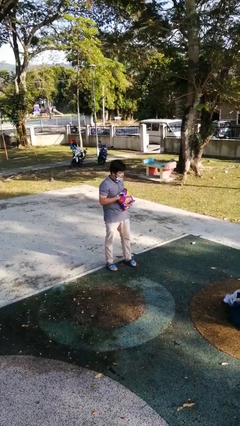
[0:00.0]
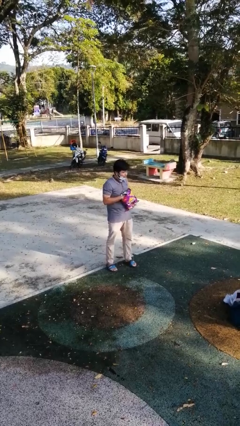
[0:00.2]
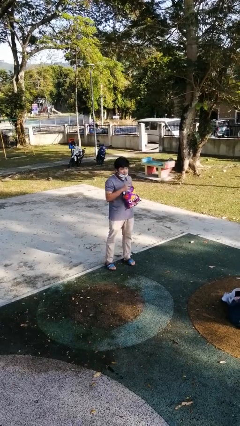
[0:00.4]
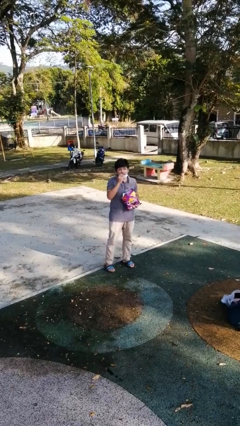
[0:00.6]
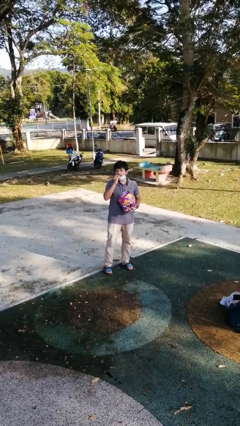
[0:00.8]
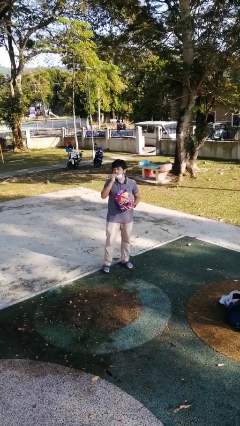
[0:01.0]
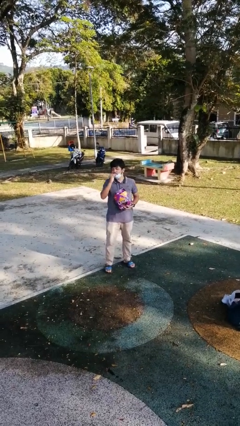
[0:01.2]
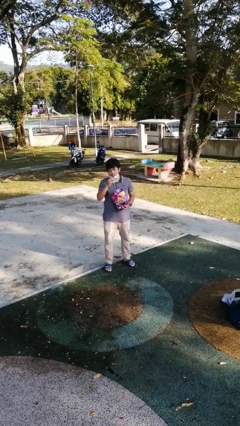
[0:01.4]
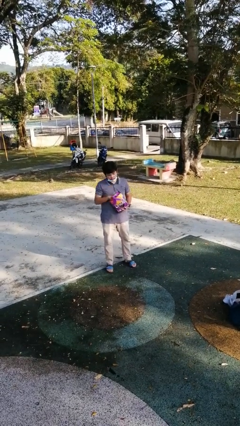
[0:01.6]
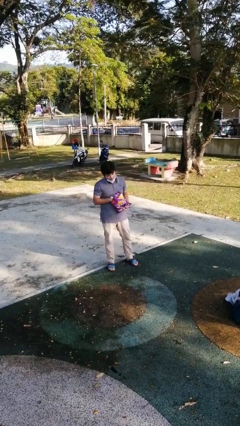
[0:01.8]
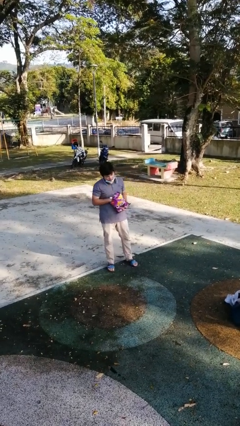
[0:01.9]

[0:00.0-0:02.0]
person eats snack from bag

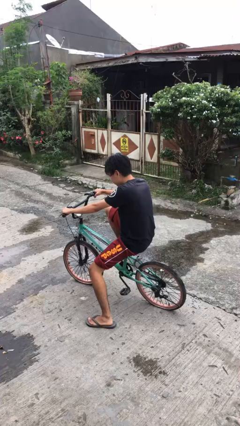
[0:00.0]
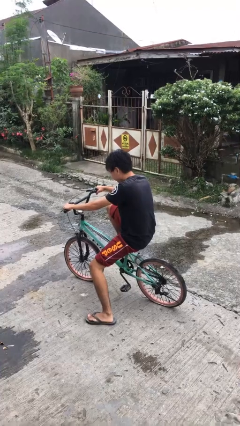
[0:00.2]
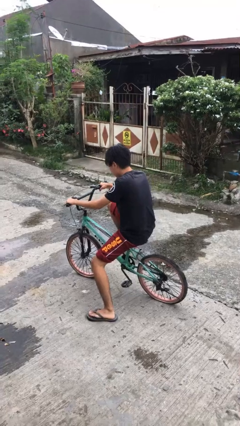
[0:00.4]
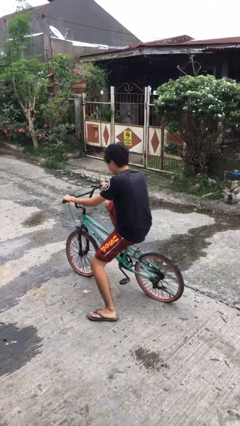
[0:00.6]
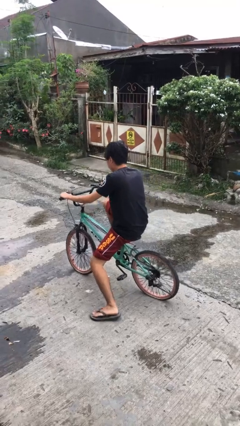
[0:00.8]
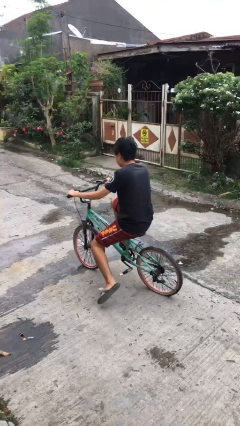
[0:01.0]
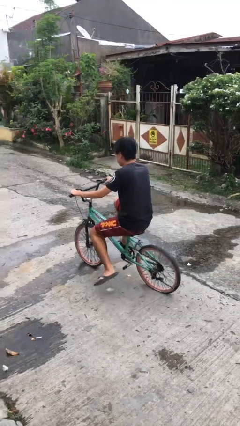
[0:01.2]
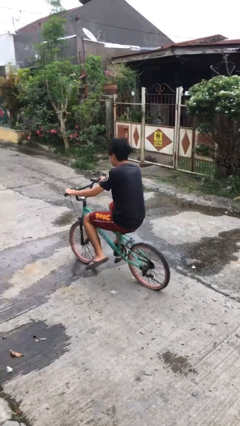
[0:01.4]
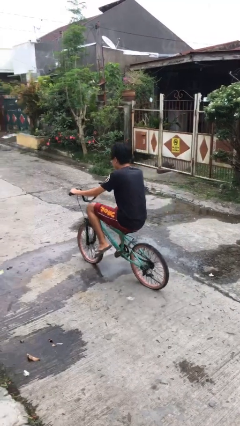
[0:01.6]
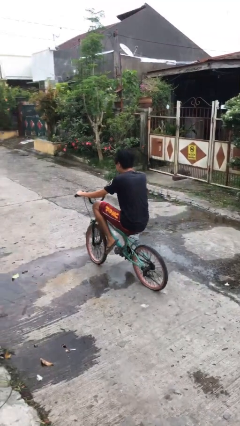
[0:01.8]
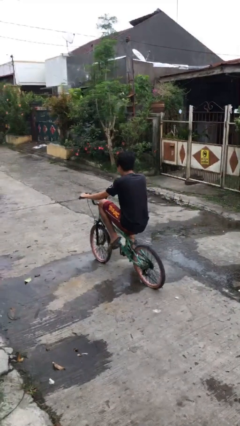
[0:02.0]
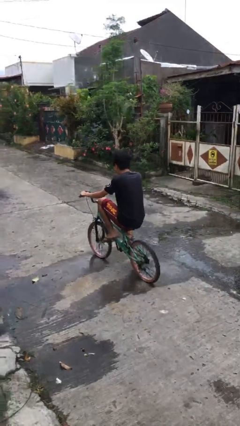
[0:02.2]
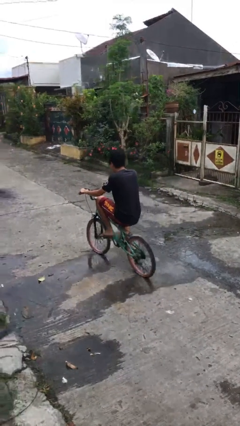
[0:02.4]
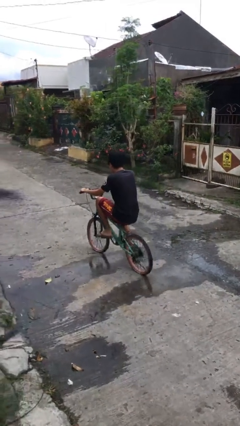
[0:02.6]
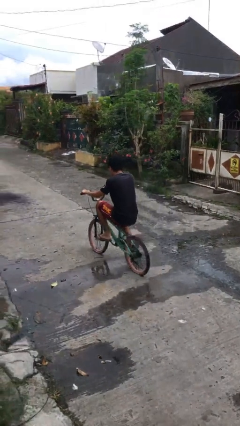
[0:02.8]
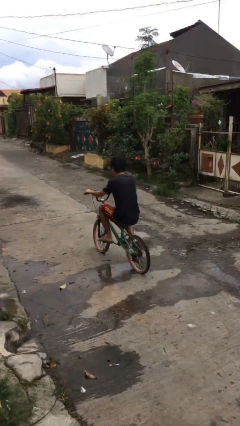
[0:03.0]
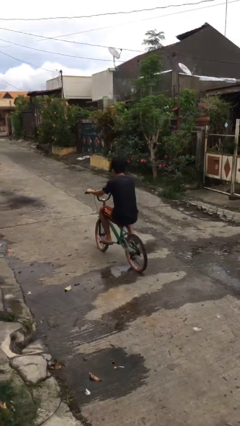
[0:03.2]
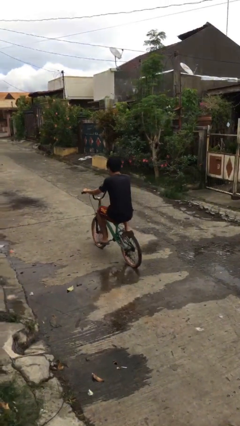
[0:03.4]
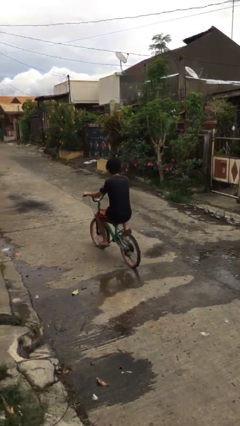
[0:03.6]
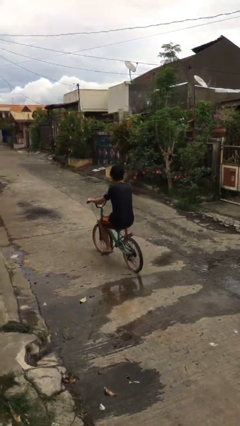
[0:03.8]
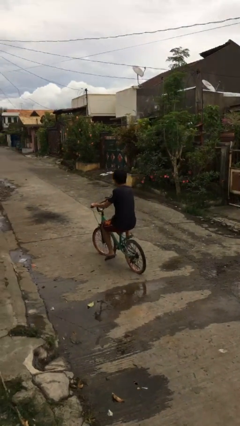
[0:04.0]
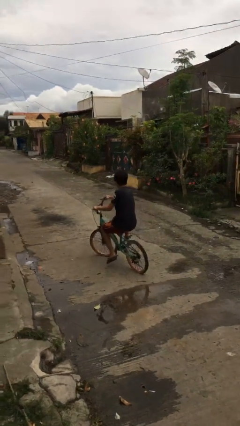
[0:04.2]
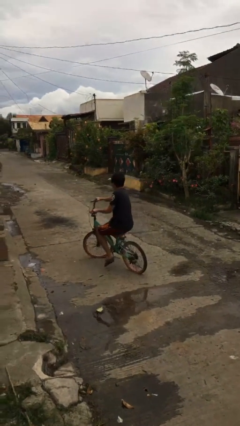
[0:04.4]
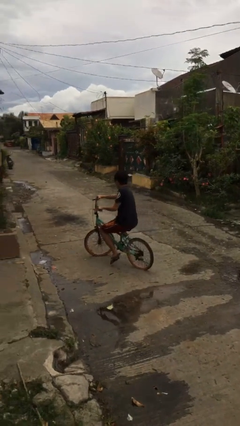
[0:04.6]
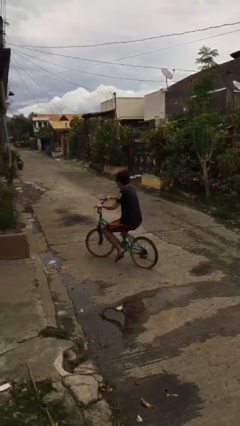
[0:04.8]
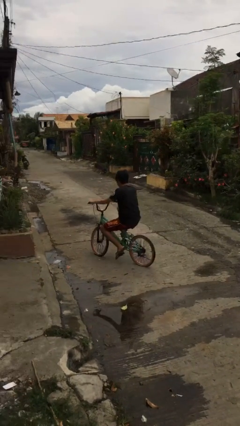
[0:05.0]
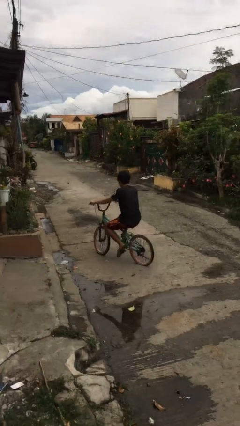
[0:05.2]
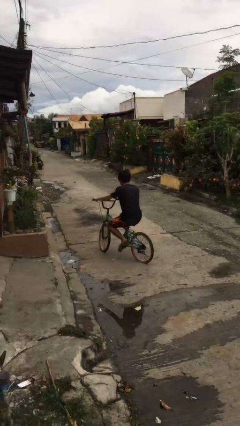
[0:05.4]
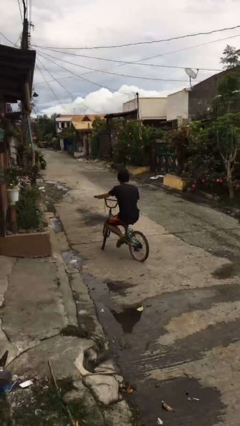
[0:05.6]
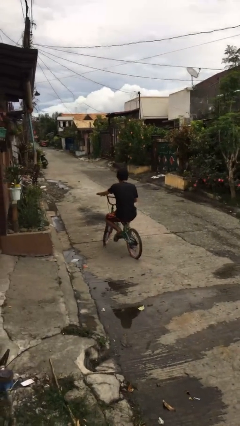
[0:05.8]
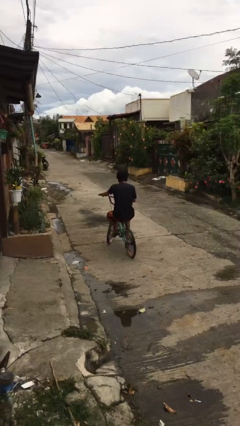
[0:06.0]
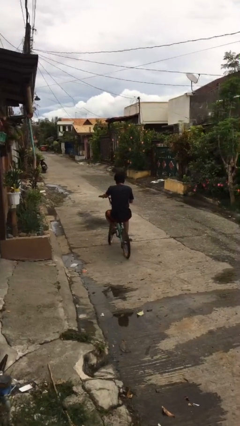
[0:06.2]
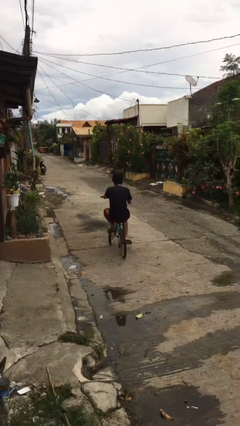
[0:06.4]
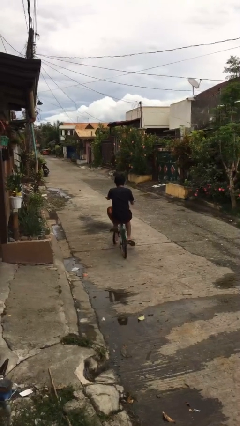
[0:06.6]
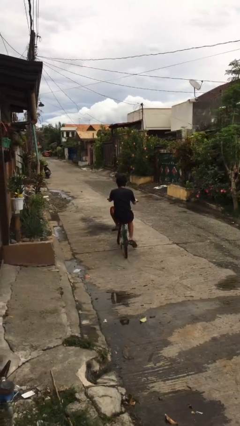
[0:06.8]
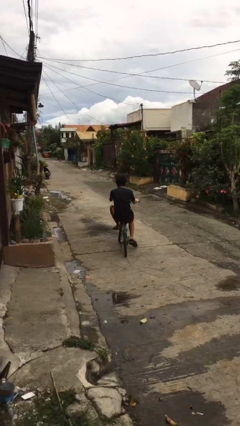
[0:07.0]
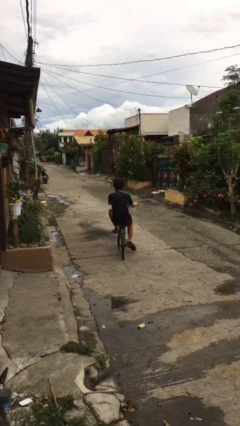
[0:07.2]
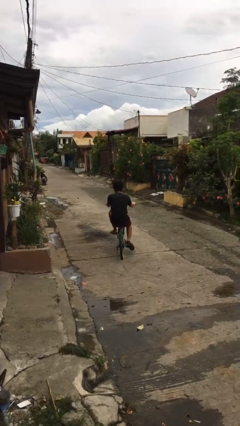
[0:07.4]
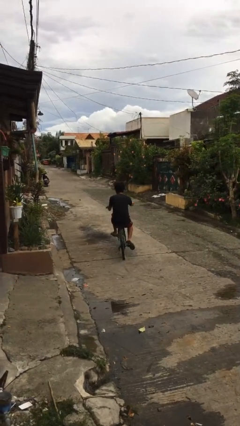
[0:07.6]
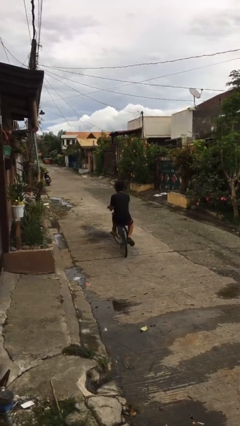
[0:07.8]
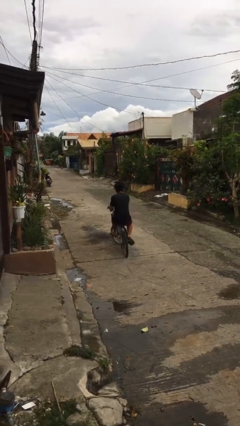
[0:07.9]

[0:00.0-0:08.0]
person rides bicycle

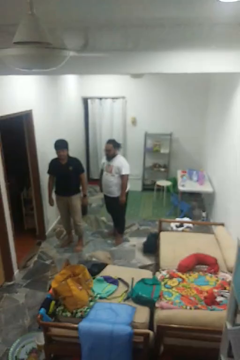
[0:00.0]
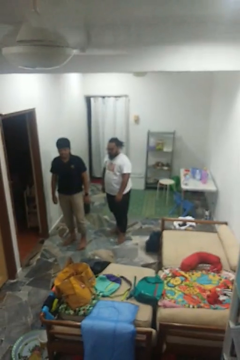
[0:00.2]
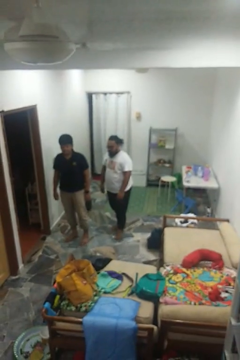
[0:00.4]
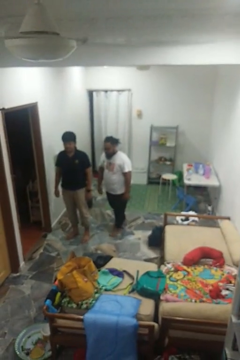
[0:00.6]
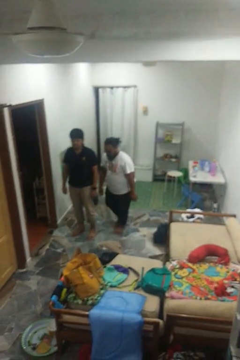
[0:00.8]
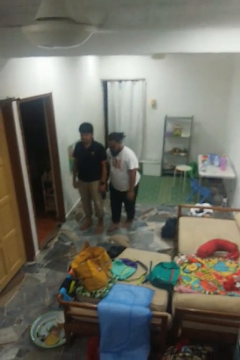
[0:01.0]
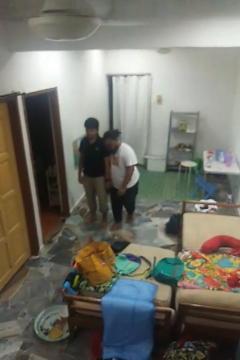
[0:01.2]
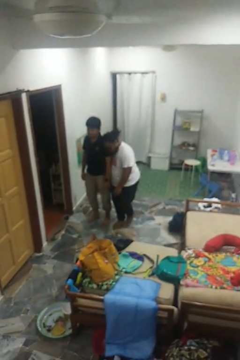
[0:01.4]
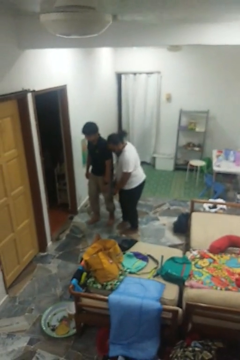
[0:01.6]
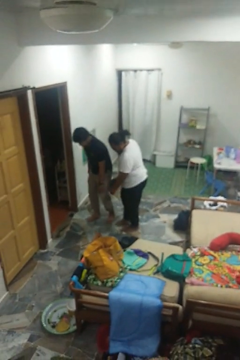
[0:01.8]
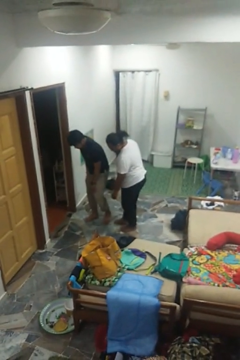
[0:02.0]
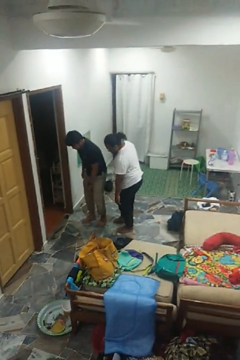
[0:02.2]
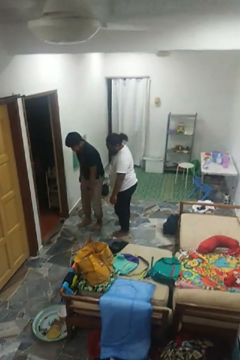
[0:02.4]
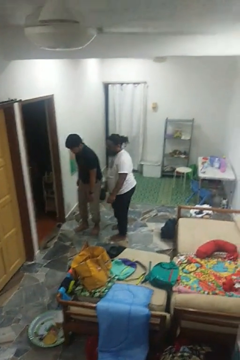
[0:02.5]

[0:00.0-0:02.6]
person bumps into person

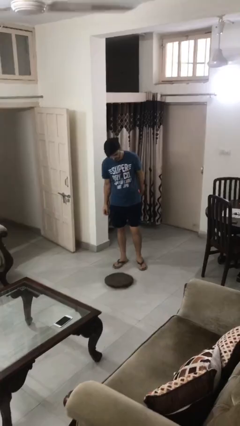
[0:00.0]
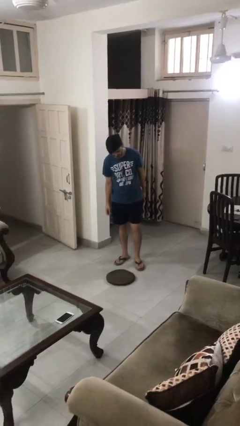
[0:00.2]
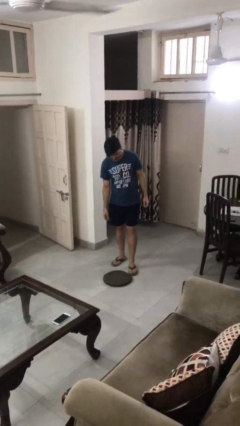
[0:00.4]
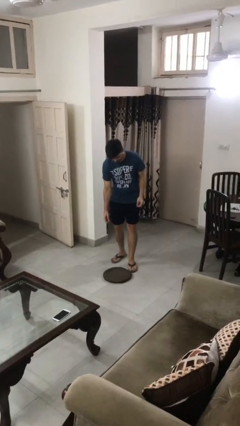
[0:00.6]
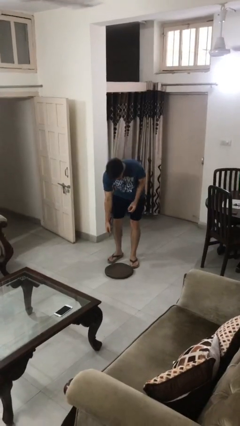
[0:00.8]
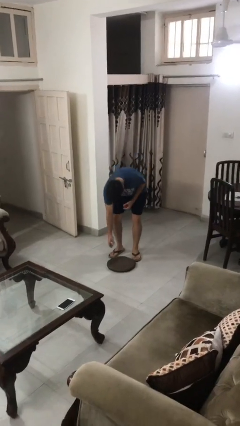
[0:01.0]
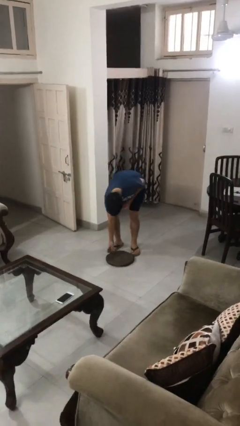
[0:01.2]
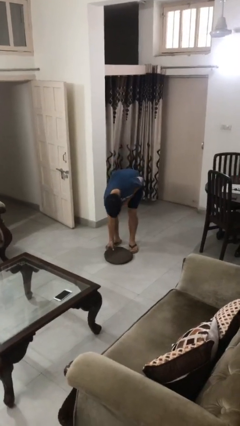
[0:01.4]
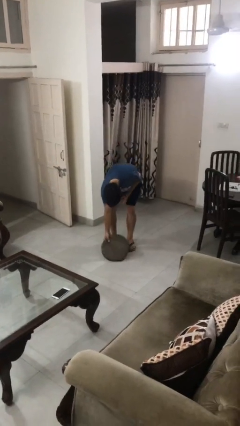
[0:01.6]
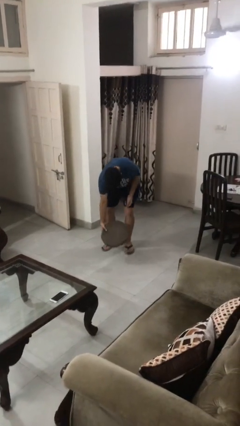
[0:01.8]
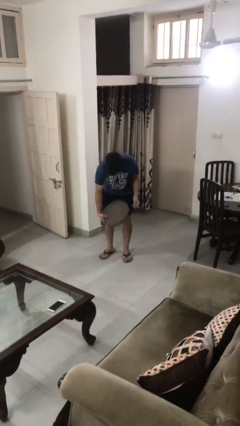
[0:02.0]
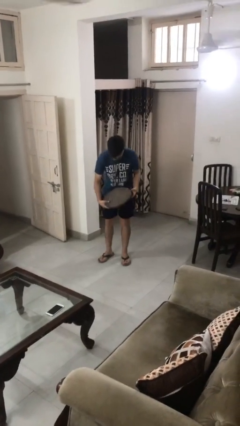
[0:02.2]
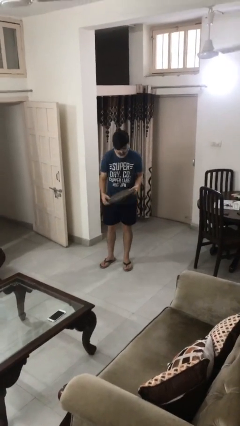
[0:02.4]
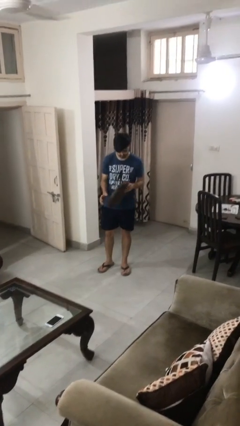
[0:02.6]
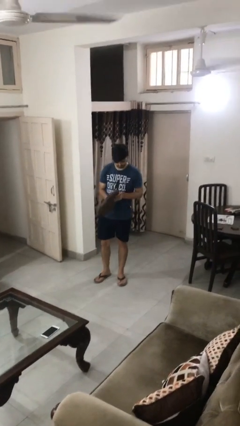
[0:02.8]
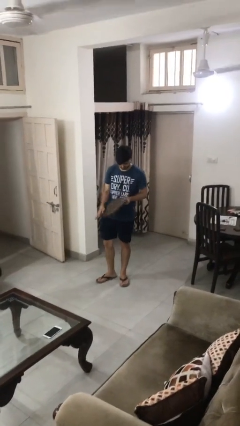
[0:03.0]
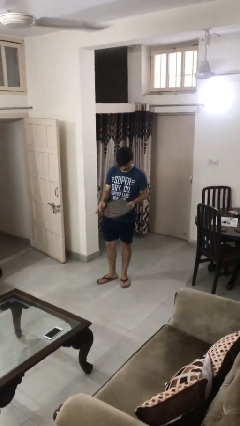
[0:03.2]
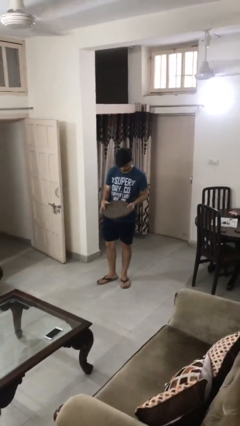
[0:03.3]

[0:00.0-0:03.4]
person picks up object from floor

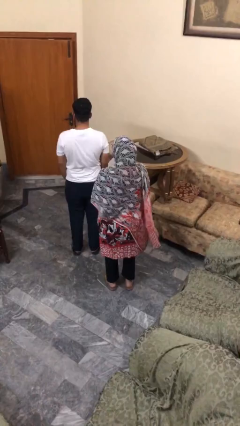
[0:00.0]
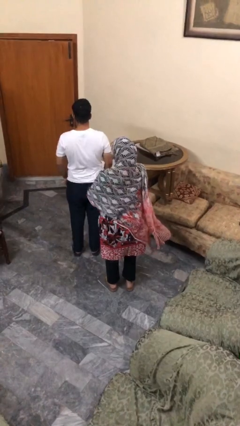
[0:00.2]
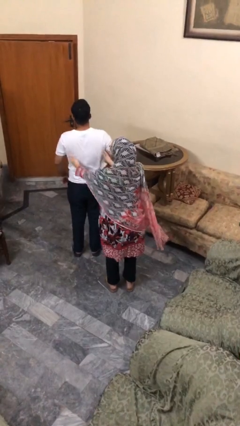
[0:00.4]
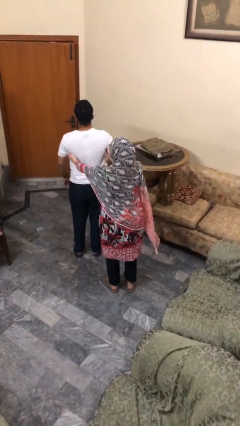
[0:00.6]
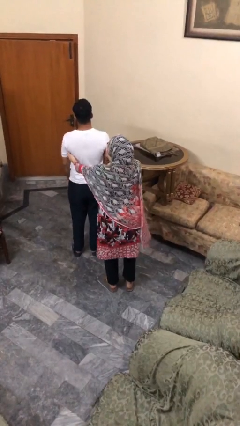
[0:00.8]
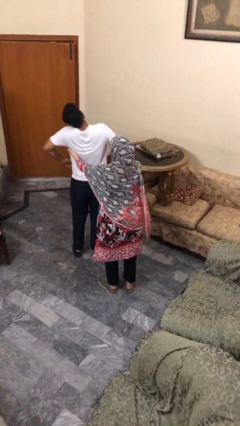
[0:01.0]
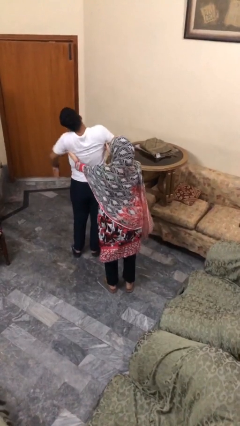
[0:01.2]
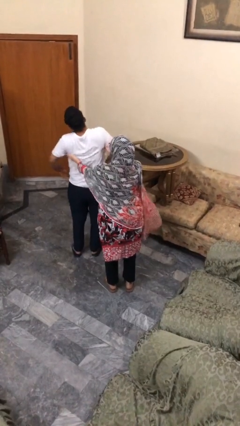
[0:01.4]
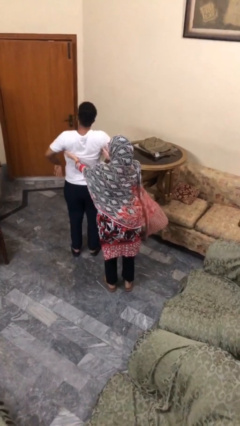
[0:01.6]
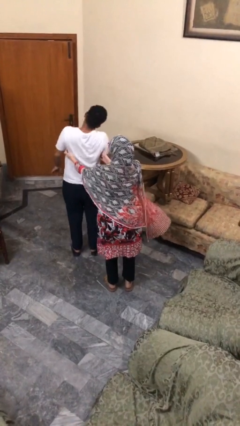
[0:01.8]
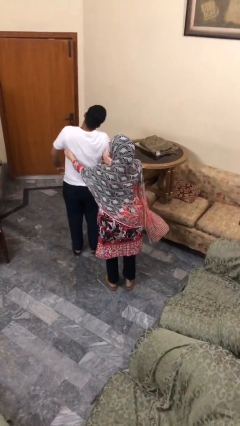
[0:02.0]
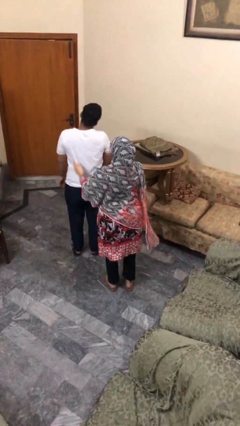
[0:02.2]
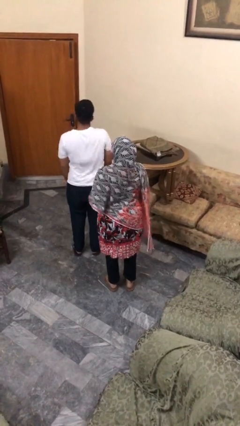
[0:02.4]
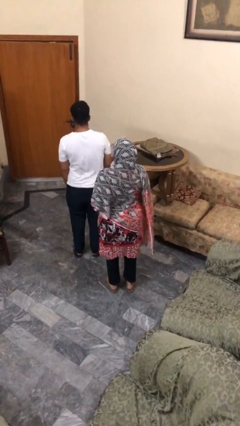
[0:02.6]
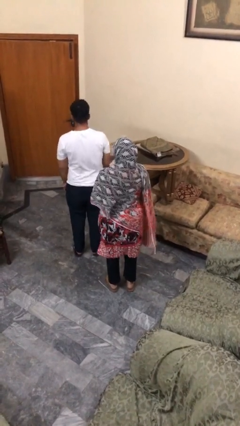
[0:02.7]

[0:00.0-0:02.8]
person tickles person
